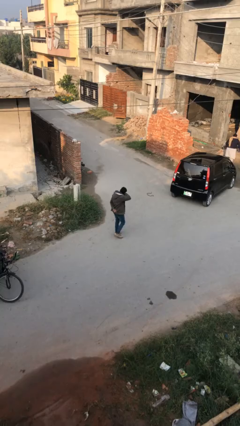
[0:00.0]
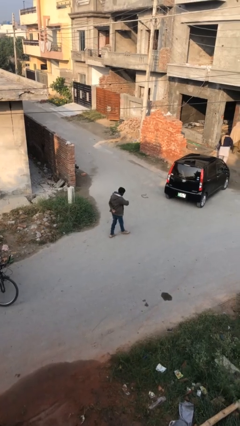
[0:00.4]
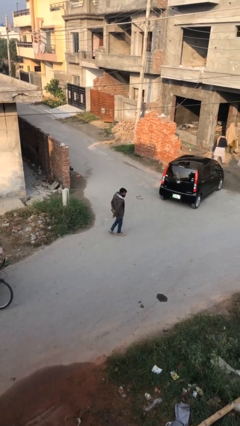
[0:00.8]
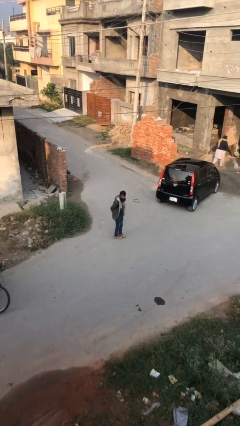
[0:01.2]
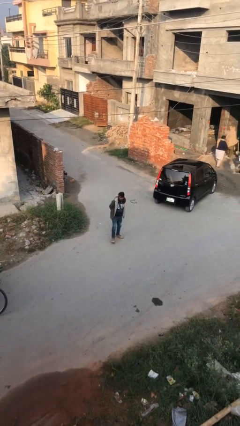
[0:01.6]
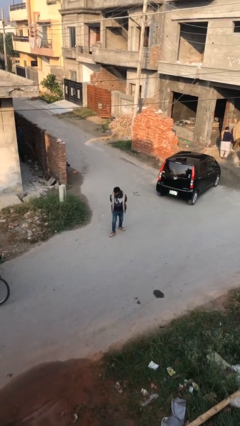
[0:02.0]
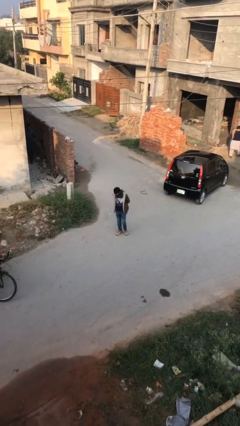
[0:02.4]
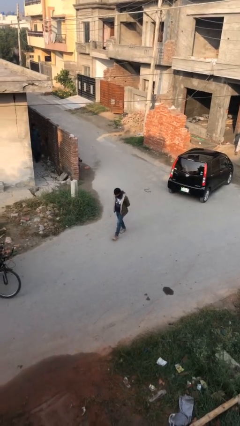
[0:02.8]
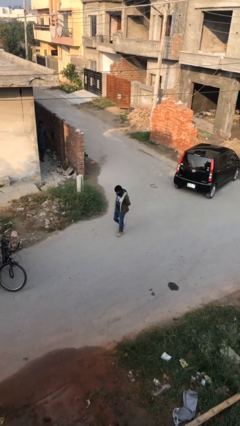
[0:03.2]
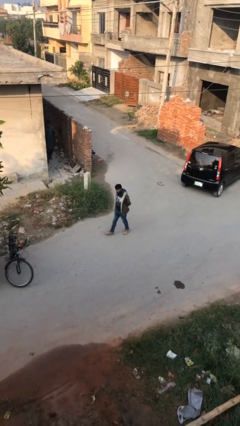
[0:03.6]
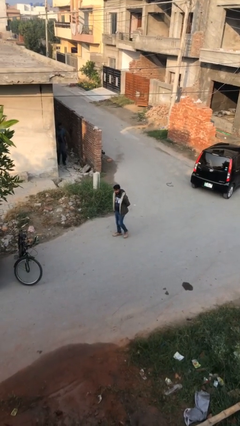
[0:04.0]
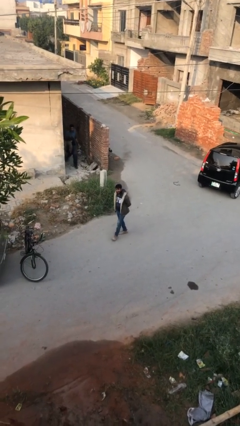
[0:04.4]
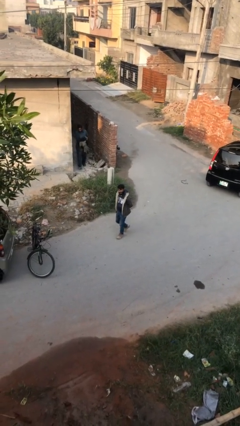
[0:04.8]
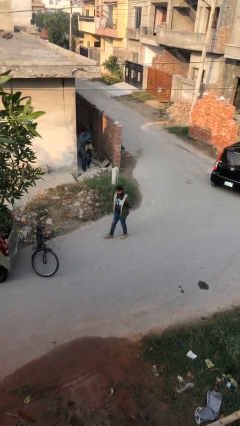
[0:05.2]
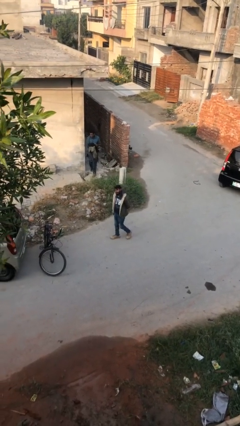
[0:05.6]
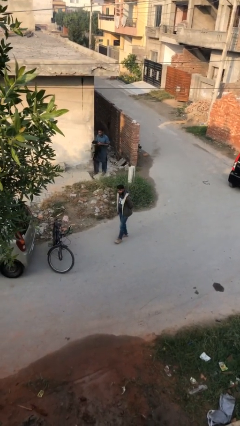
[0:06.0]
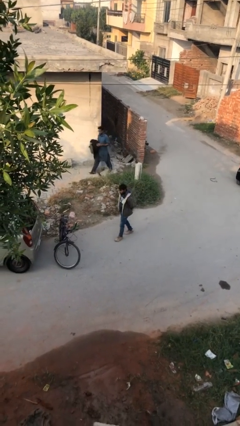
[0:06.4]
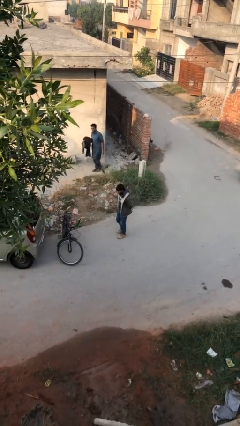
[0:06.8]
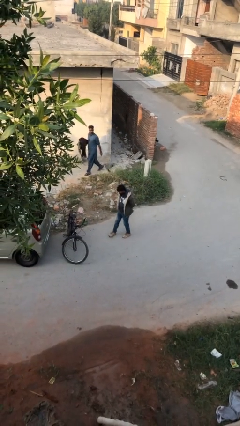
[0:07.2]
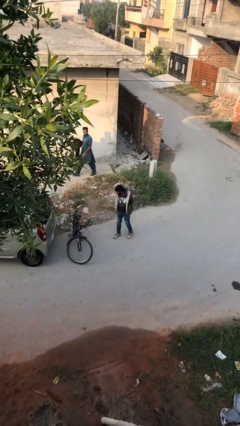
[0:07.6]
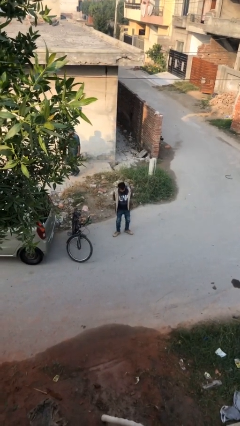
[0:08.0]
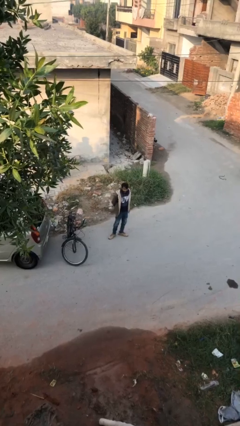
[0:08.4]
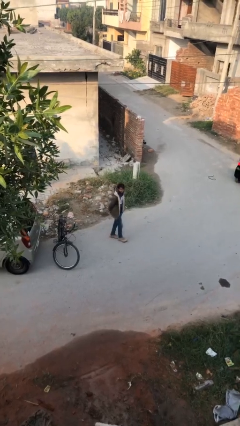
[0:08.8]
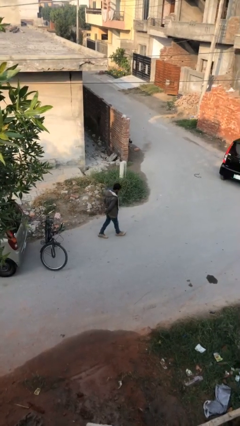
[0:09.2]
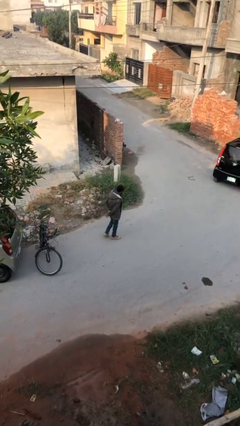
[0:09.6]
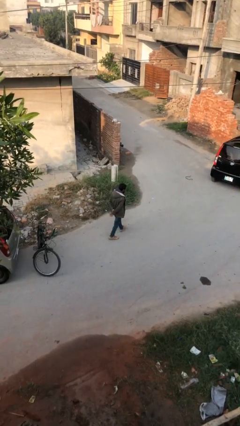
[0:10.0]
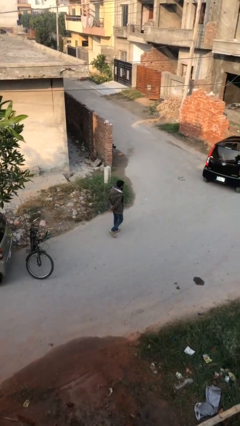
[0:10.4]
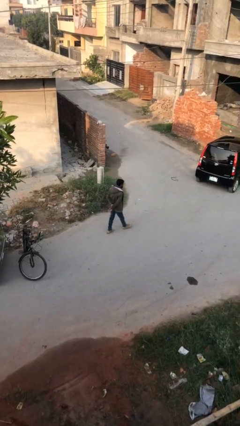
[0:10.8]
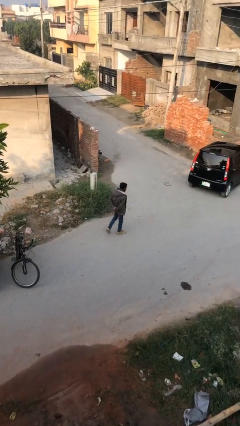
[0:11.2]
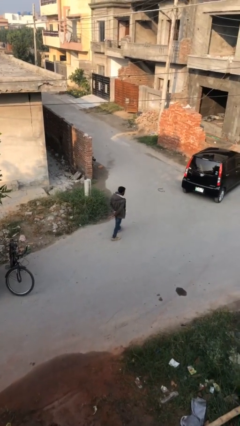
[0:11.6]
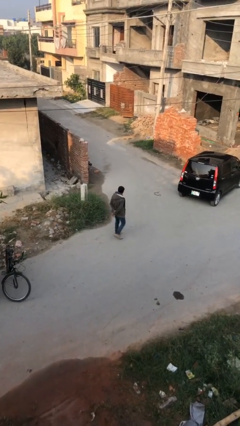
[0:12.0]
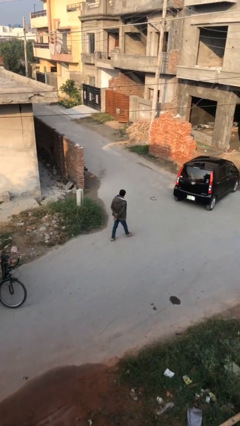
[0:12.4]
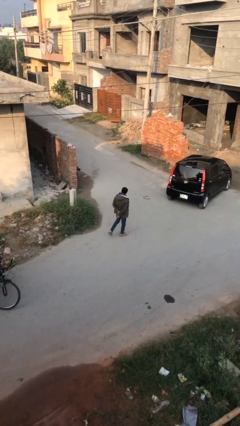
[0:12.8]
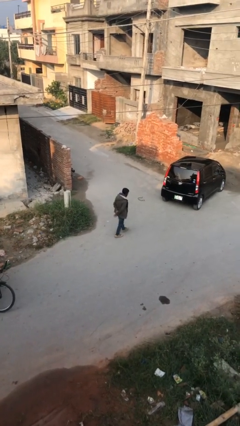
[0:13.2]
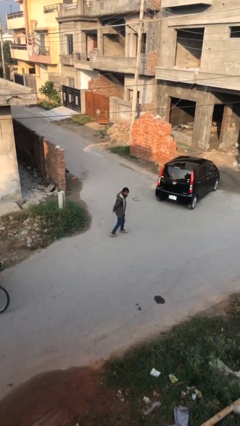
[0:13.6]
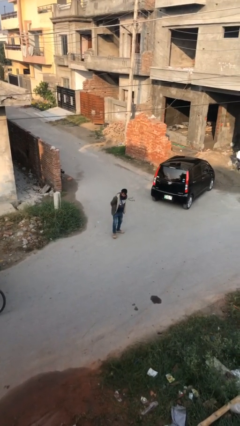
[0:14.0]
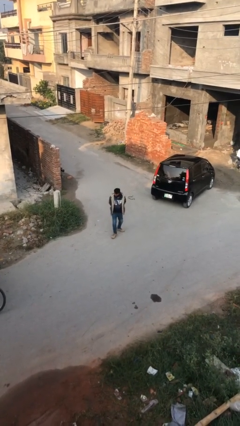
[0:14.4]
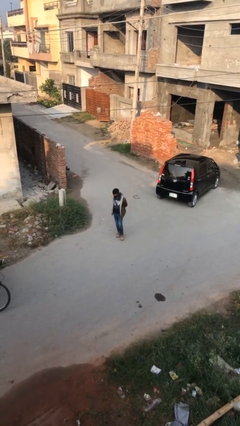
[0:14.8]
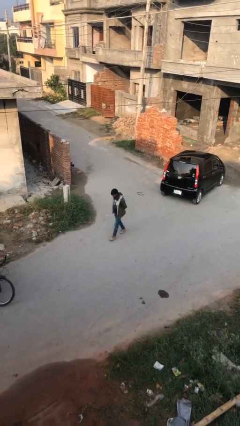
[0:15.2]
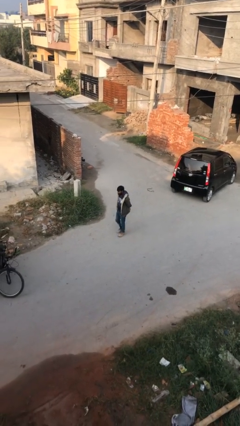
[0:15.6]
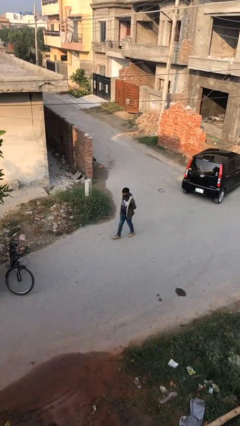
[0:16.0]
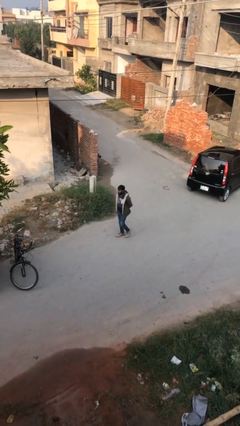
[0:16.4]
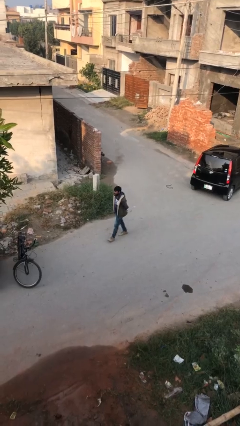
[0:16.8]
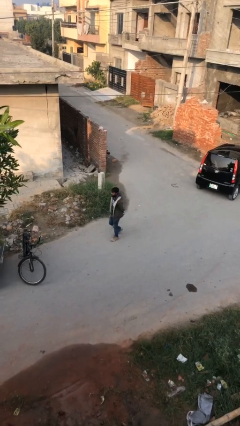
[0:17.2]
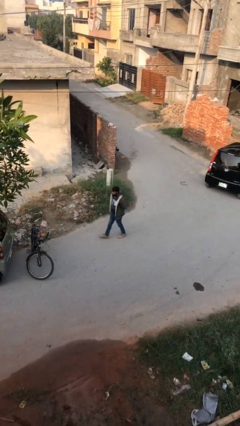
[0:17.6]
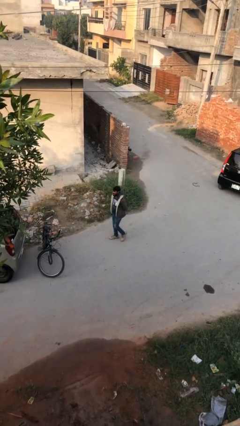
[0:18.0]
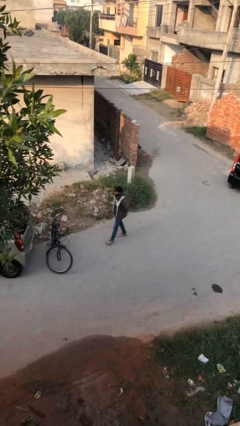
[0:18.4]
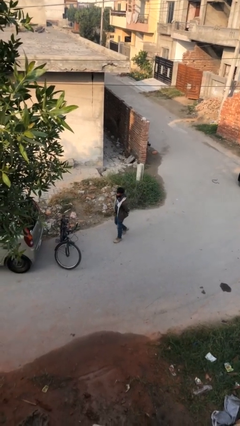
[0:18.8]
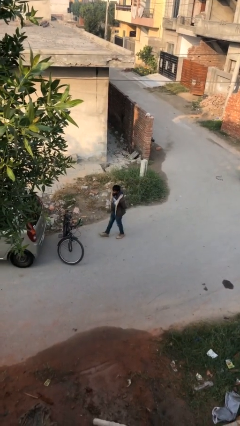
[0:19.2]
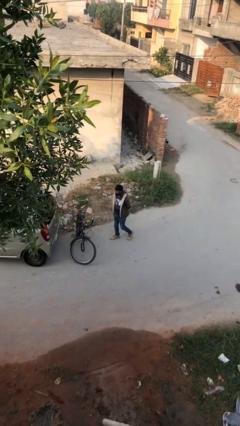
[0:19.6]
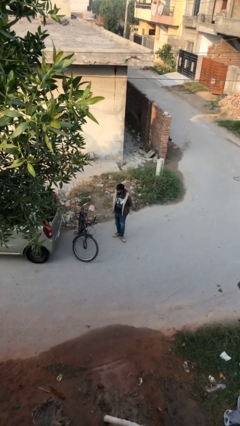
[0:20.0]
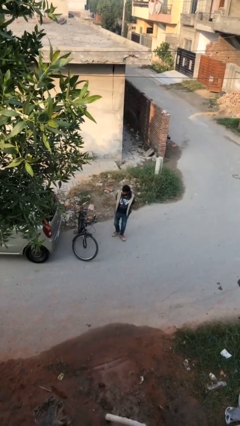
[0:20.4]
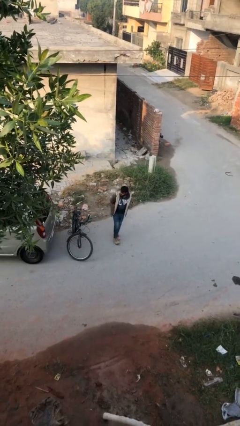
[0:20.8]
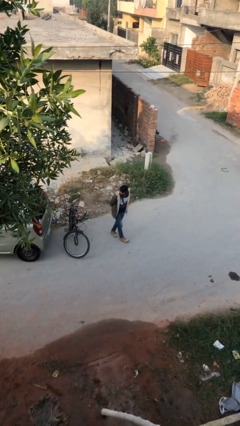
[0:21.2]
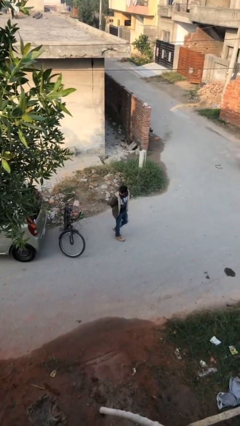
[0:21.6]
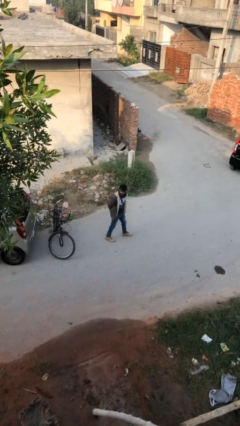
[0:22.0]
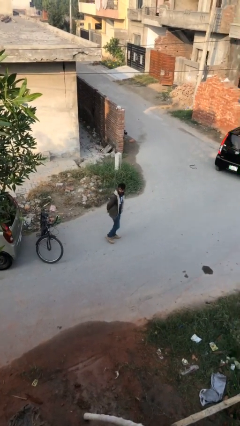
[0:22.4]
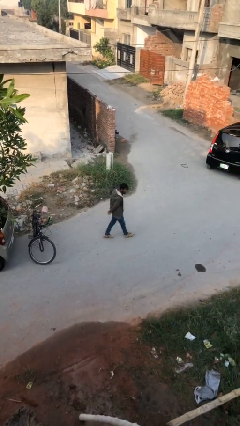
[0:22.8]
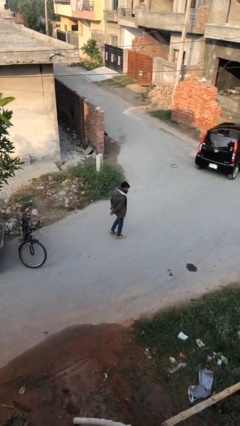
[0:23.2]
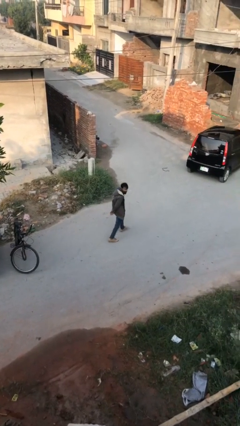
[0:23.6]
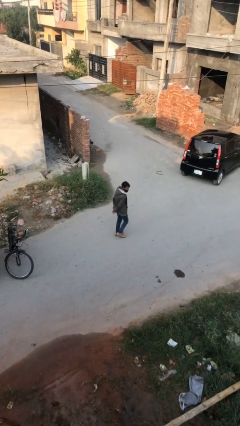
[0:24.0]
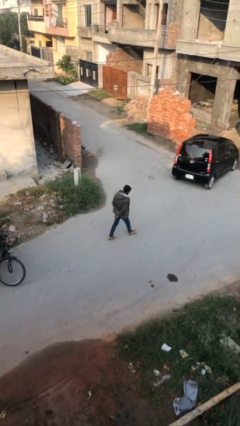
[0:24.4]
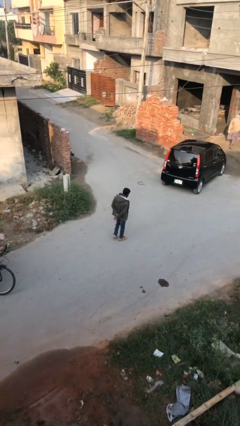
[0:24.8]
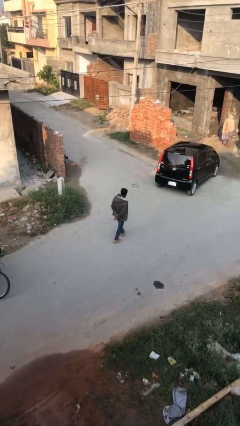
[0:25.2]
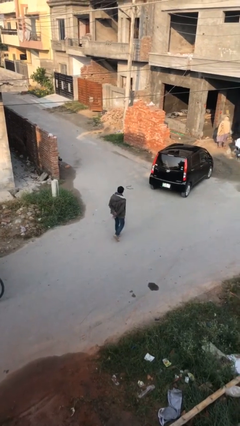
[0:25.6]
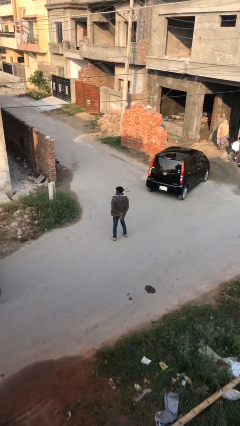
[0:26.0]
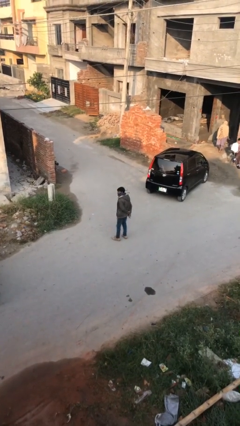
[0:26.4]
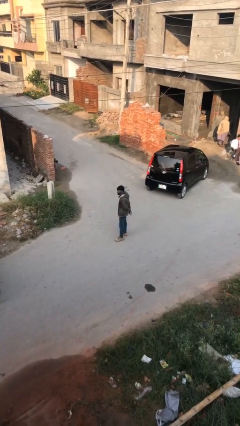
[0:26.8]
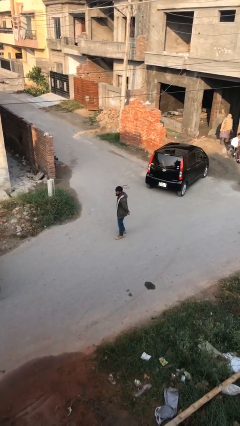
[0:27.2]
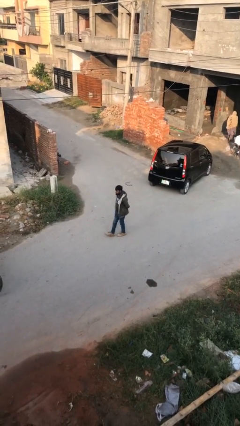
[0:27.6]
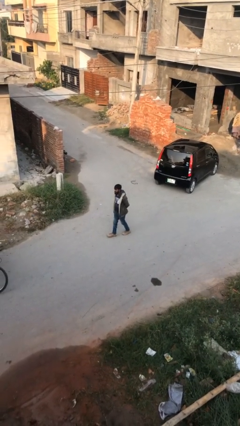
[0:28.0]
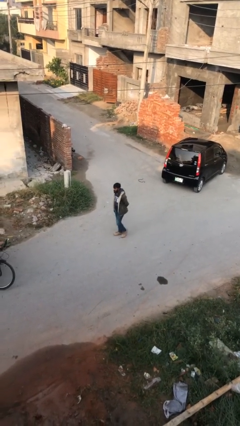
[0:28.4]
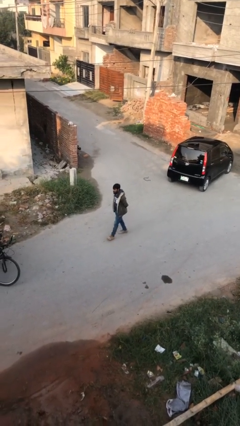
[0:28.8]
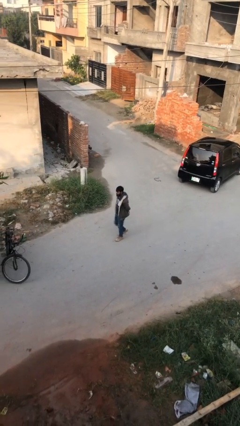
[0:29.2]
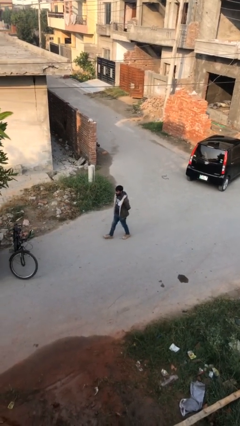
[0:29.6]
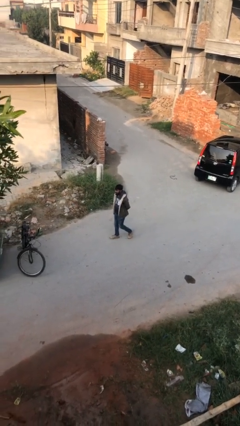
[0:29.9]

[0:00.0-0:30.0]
person walks

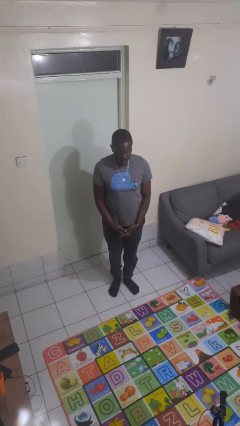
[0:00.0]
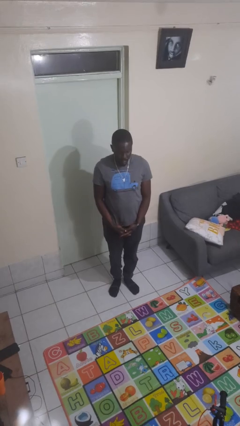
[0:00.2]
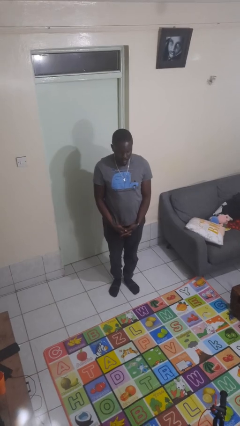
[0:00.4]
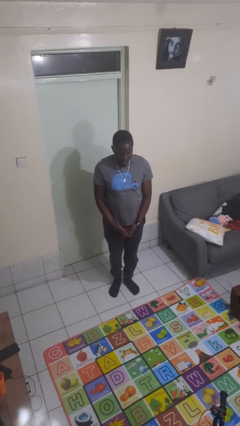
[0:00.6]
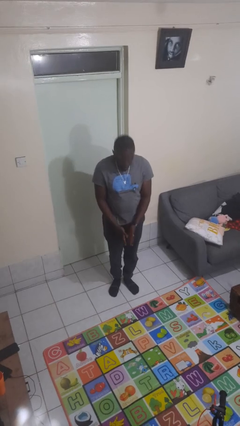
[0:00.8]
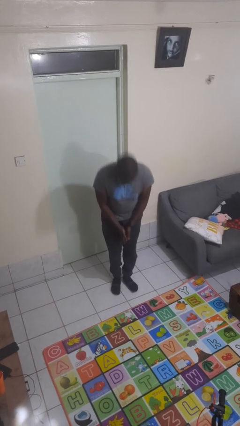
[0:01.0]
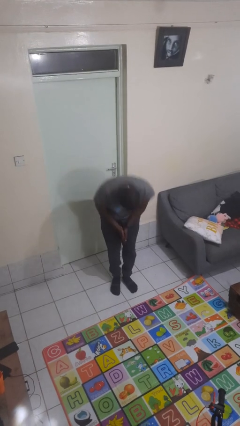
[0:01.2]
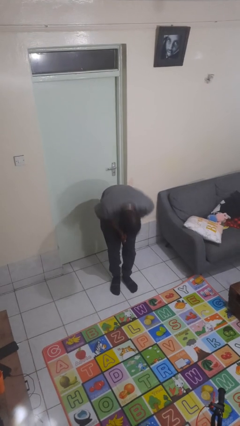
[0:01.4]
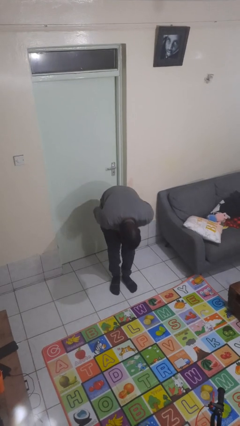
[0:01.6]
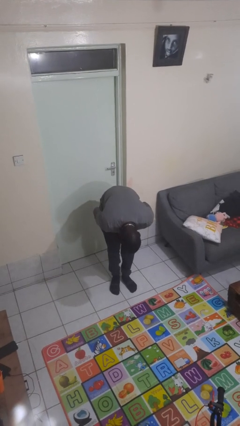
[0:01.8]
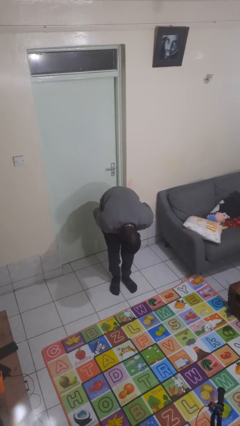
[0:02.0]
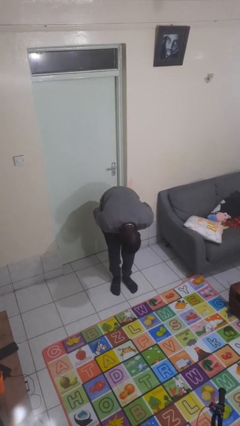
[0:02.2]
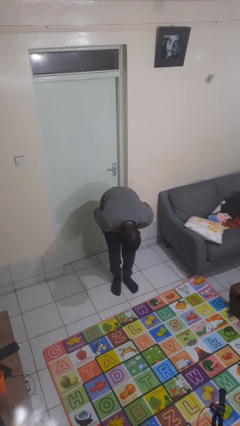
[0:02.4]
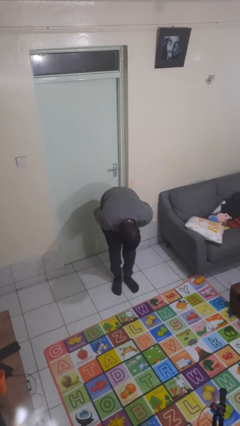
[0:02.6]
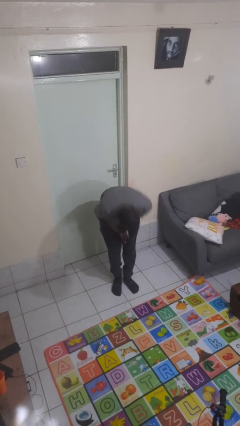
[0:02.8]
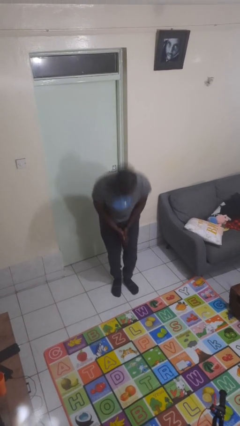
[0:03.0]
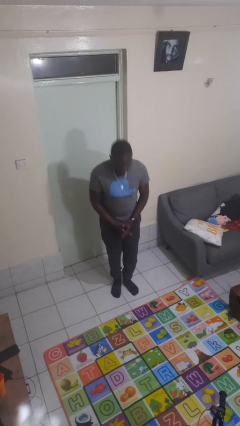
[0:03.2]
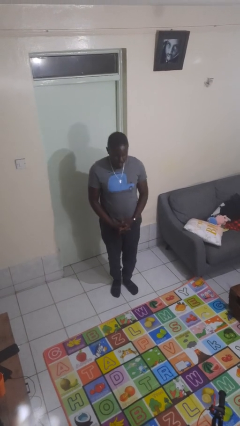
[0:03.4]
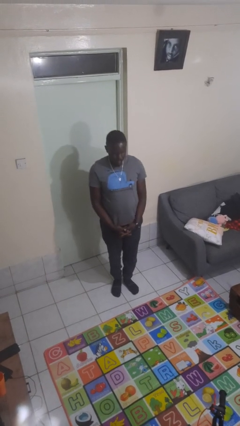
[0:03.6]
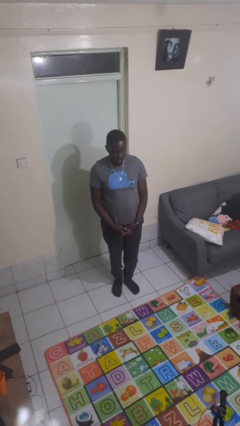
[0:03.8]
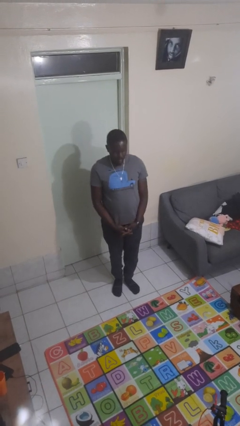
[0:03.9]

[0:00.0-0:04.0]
person bows
